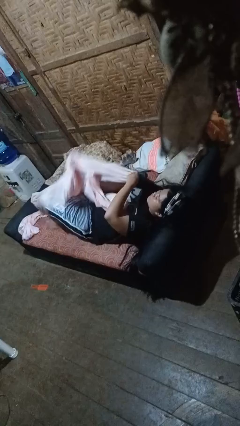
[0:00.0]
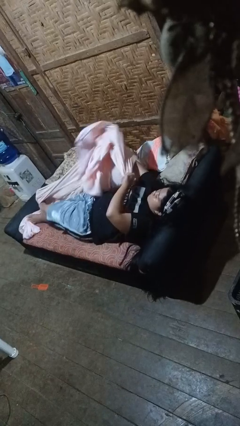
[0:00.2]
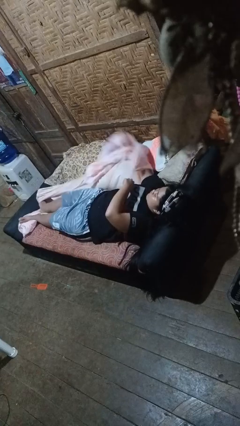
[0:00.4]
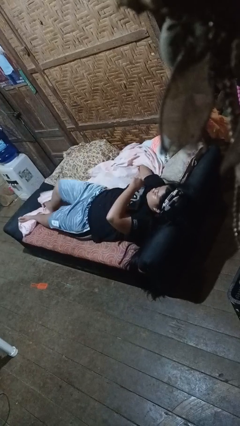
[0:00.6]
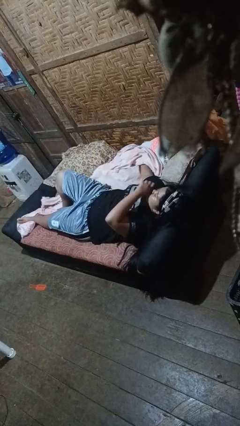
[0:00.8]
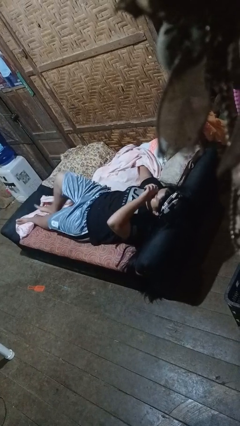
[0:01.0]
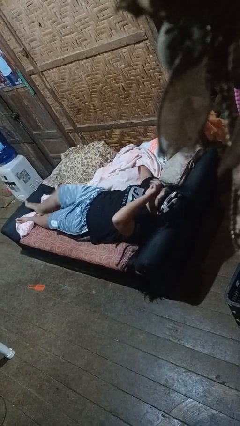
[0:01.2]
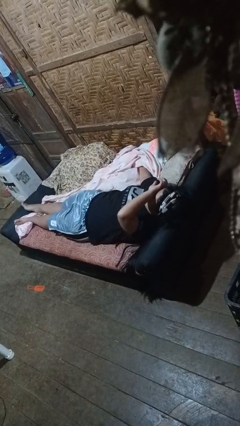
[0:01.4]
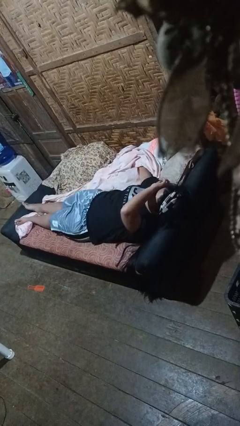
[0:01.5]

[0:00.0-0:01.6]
person uncovers with bedsheets

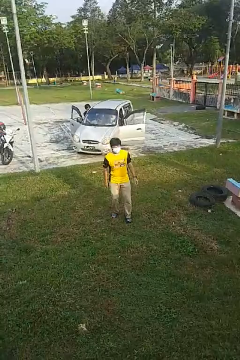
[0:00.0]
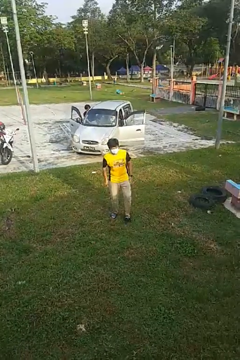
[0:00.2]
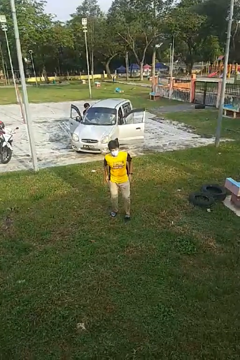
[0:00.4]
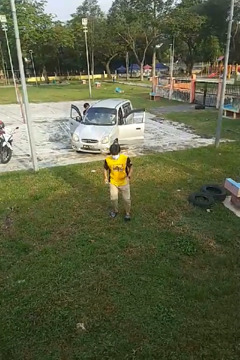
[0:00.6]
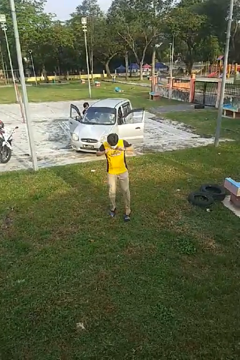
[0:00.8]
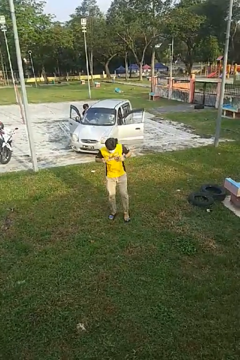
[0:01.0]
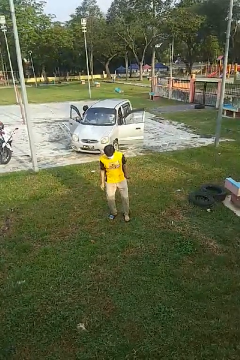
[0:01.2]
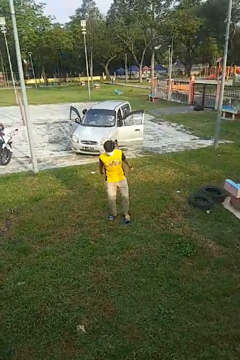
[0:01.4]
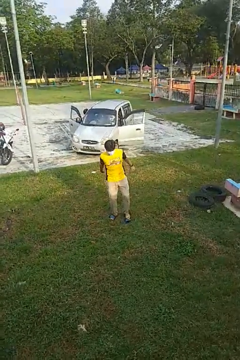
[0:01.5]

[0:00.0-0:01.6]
person jumps

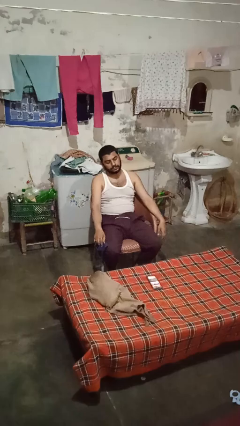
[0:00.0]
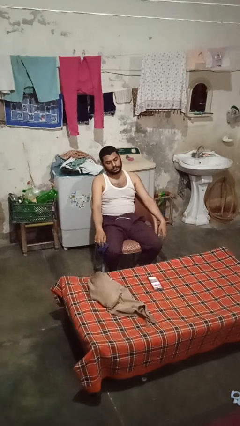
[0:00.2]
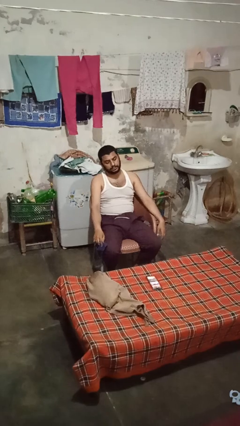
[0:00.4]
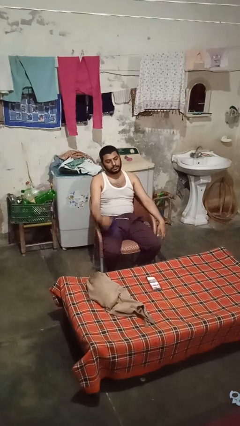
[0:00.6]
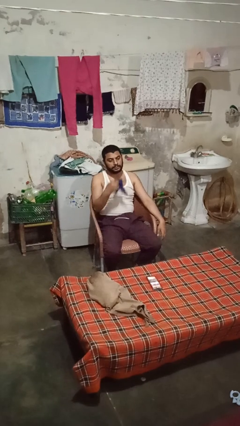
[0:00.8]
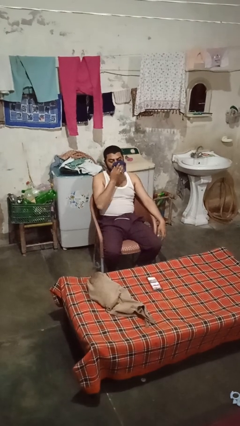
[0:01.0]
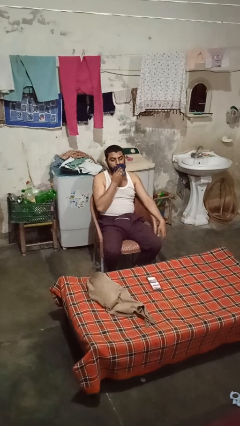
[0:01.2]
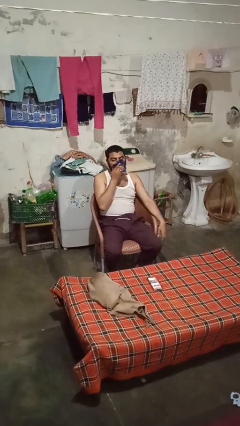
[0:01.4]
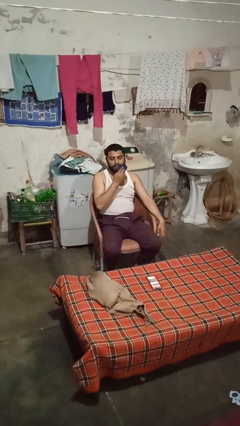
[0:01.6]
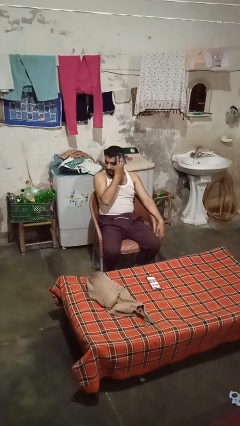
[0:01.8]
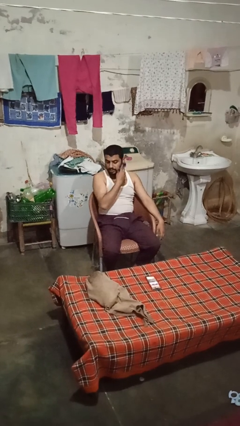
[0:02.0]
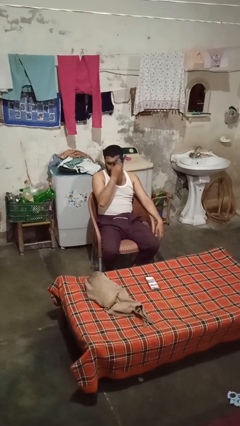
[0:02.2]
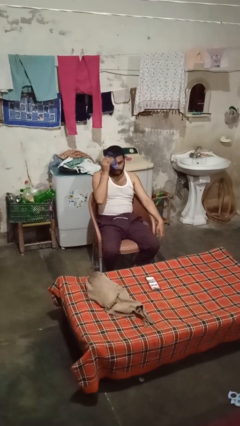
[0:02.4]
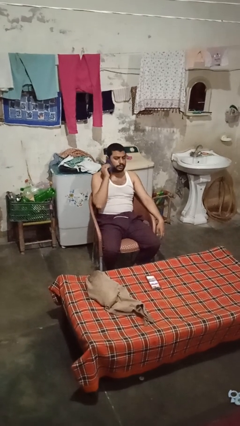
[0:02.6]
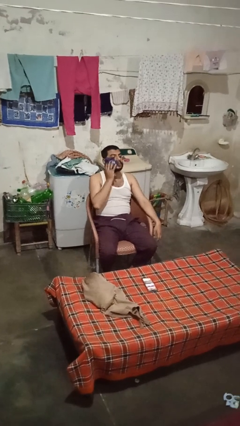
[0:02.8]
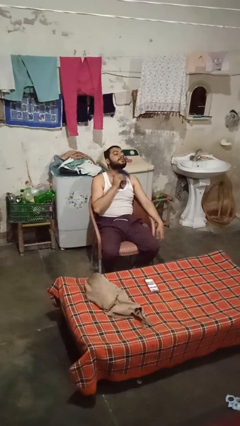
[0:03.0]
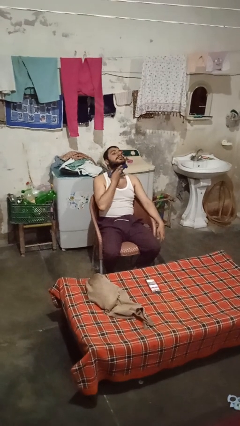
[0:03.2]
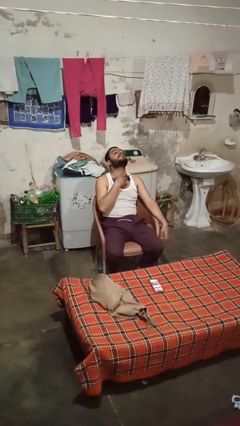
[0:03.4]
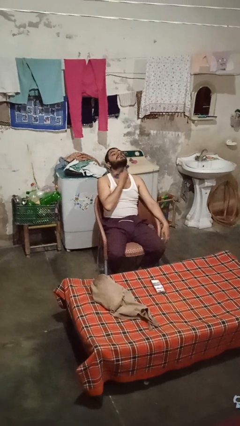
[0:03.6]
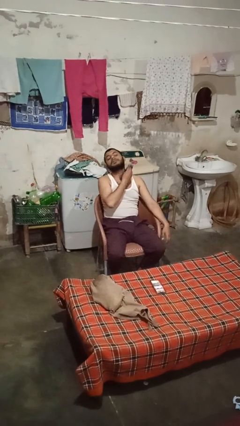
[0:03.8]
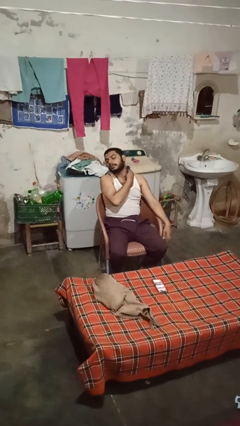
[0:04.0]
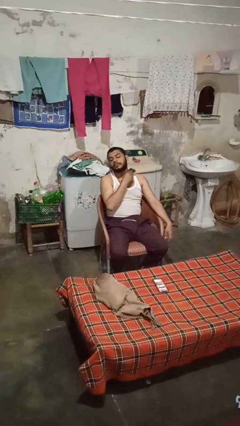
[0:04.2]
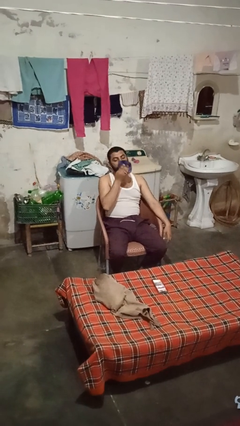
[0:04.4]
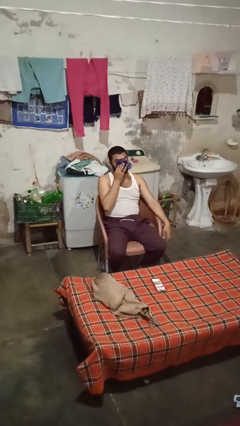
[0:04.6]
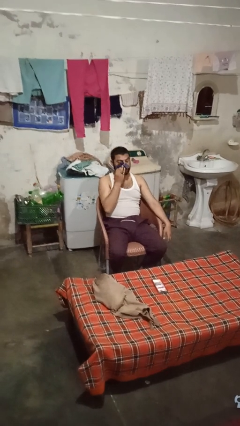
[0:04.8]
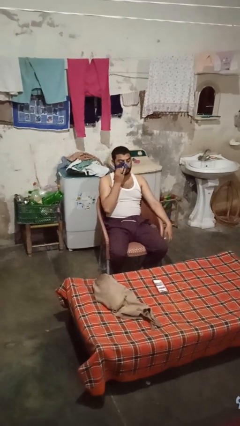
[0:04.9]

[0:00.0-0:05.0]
person wipes mouth with napkin

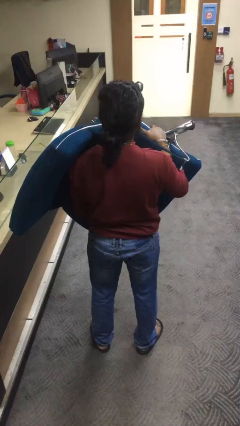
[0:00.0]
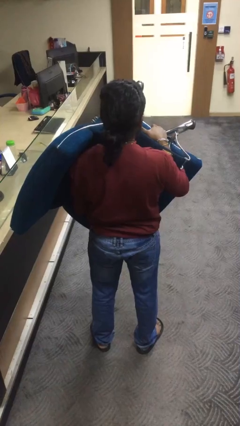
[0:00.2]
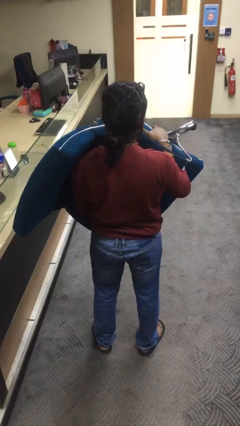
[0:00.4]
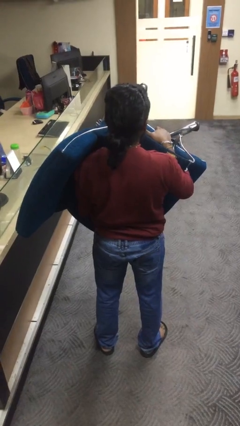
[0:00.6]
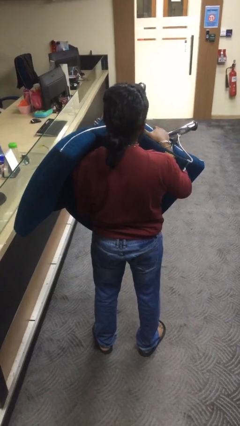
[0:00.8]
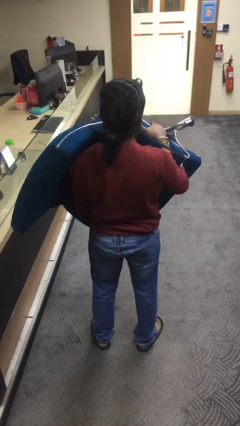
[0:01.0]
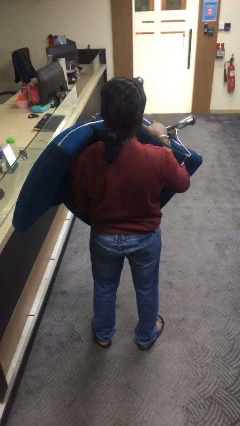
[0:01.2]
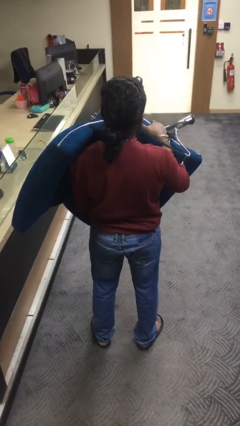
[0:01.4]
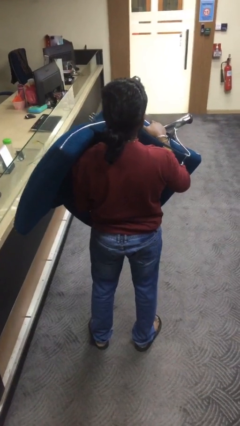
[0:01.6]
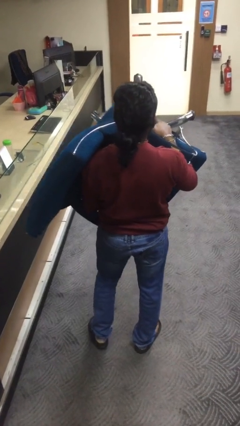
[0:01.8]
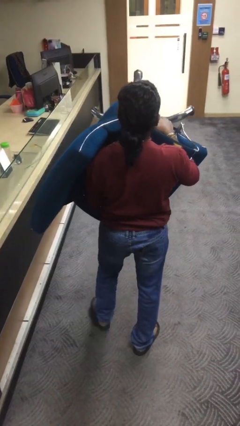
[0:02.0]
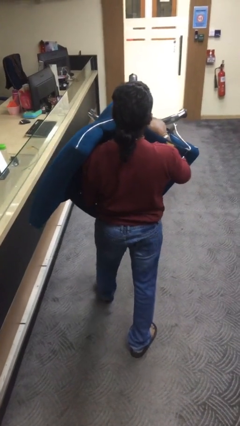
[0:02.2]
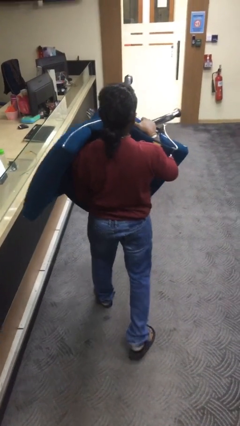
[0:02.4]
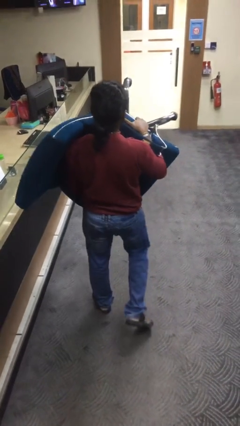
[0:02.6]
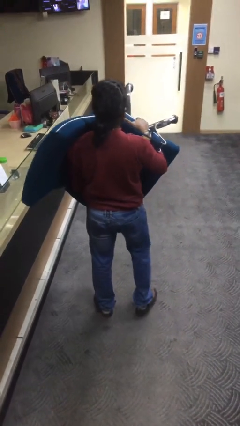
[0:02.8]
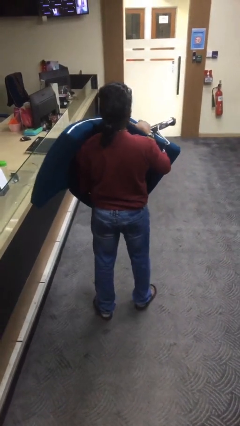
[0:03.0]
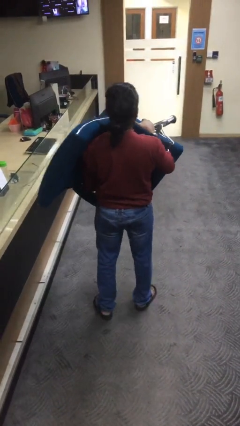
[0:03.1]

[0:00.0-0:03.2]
person carries furniture

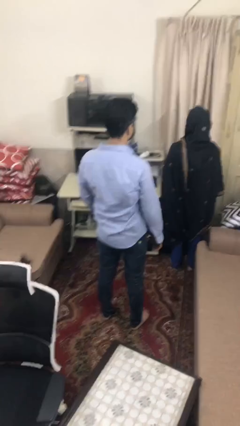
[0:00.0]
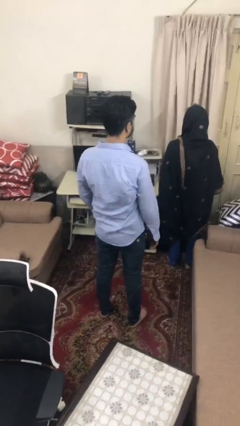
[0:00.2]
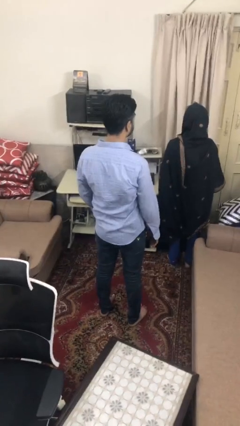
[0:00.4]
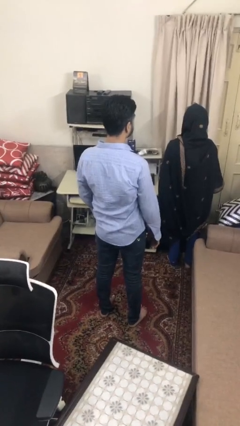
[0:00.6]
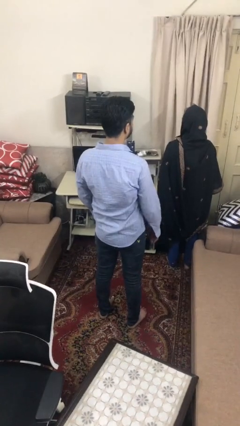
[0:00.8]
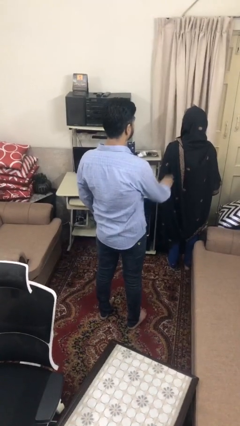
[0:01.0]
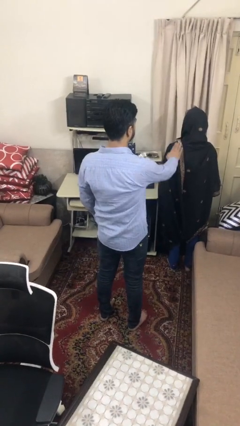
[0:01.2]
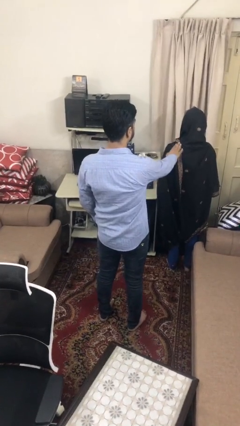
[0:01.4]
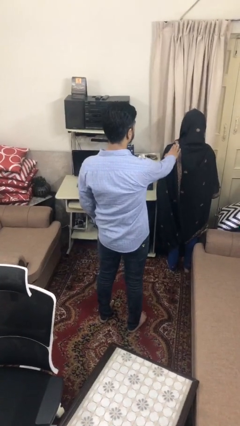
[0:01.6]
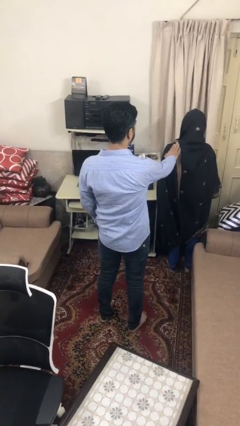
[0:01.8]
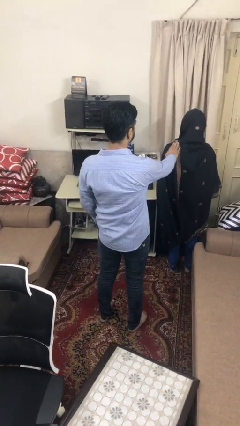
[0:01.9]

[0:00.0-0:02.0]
person touches back of person

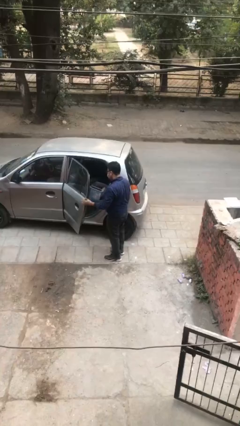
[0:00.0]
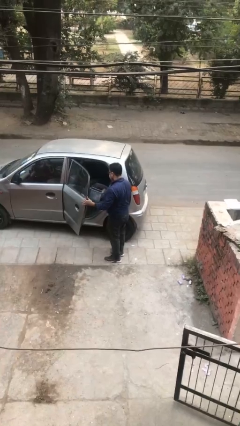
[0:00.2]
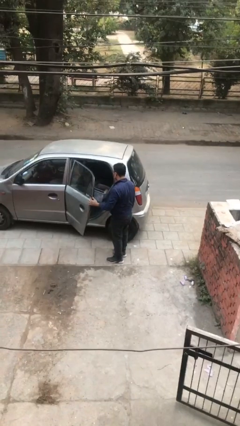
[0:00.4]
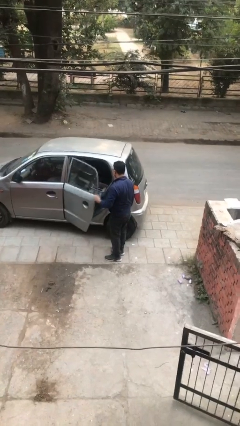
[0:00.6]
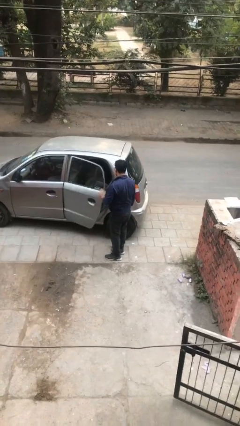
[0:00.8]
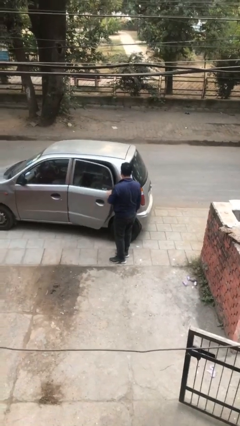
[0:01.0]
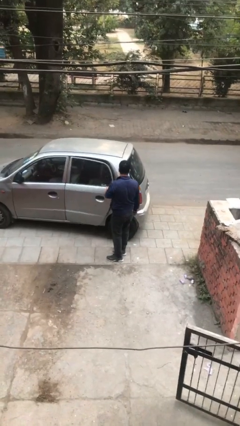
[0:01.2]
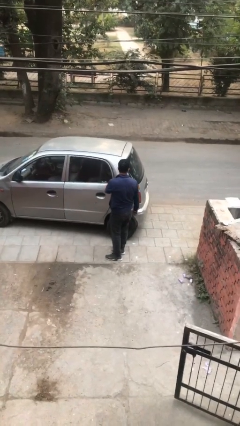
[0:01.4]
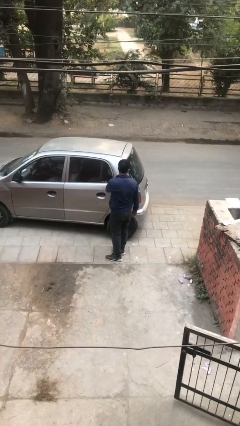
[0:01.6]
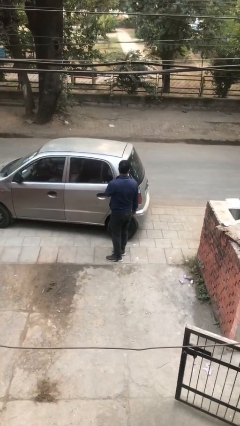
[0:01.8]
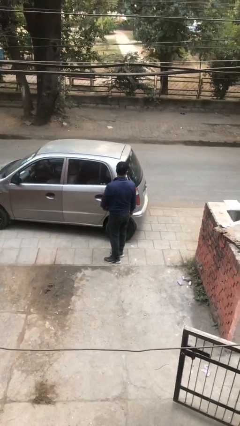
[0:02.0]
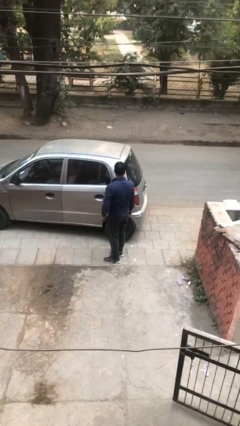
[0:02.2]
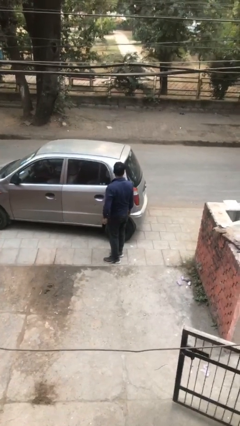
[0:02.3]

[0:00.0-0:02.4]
person closes car door

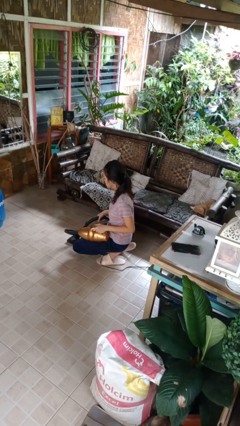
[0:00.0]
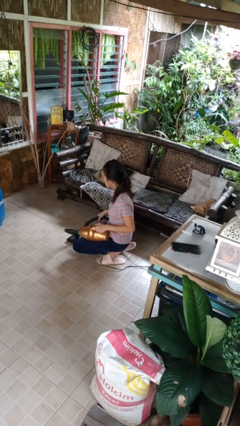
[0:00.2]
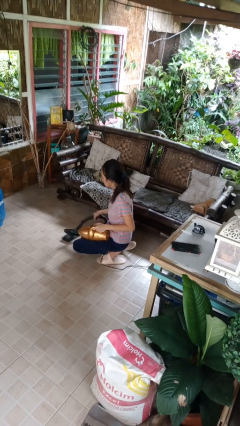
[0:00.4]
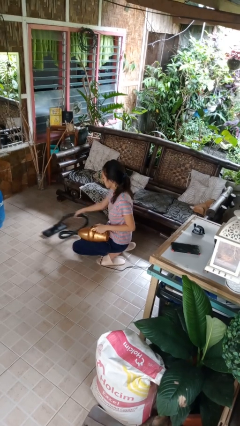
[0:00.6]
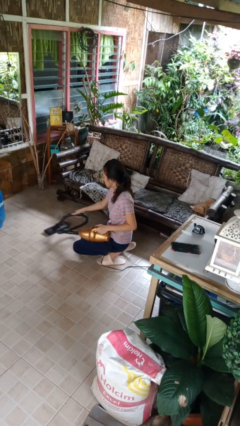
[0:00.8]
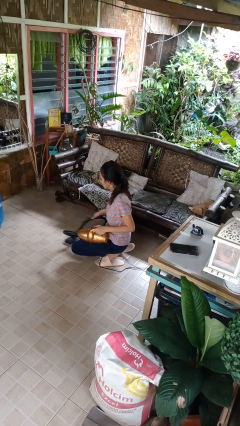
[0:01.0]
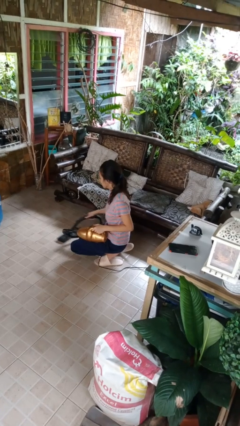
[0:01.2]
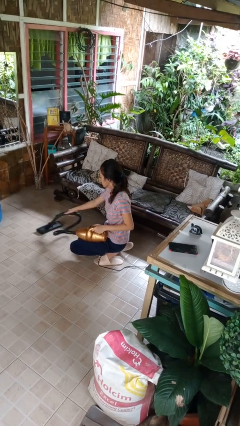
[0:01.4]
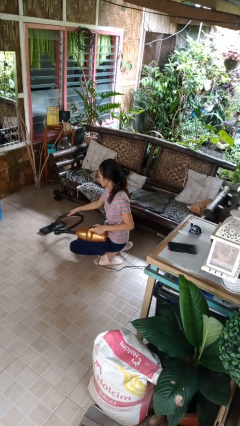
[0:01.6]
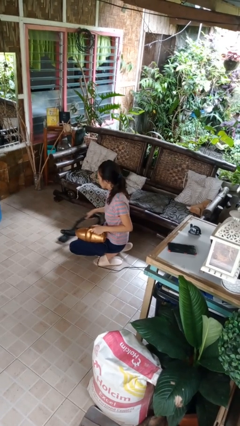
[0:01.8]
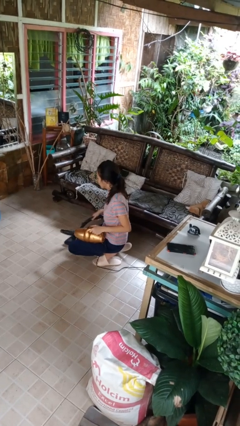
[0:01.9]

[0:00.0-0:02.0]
person vacuums carpet
